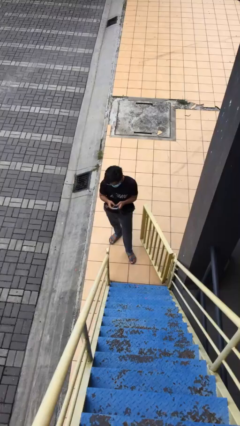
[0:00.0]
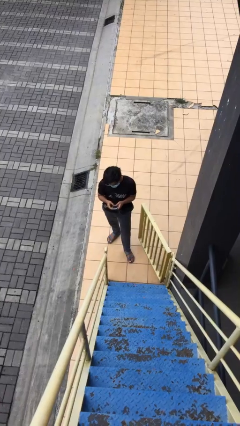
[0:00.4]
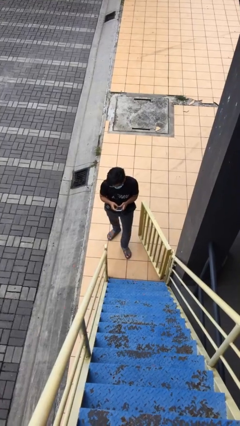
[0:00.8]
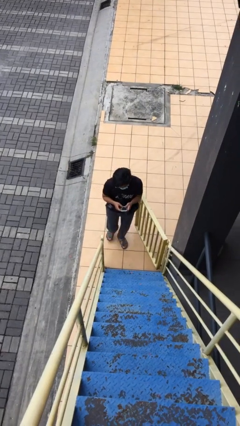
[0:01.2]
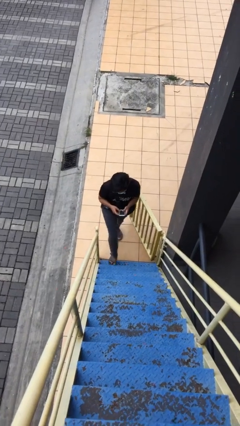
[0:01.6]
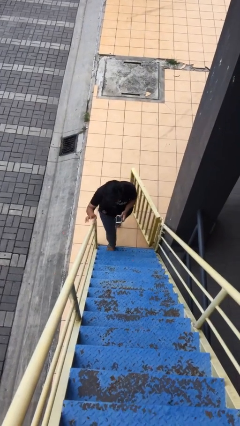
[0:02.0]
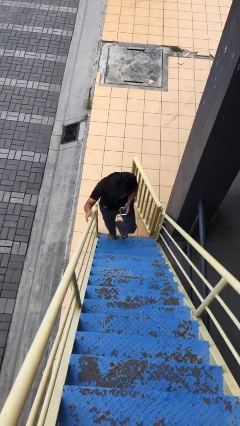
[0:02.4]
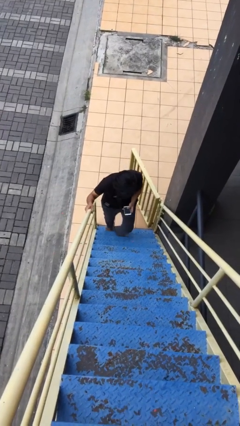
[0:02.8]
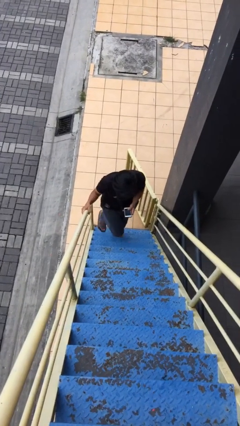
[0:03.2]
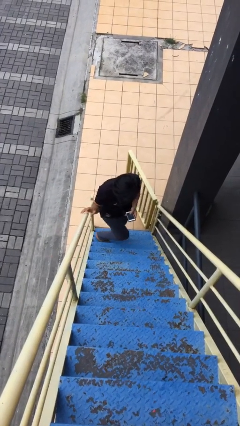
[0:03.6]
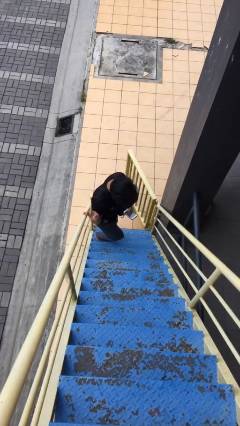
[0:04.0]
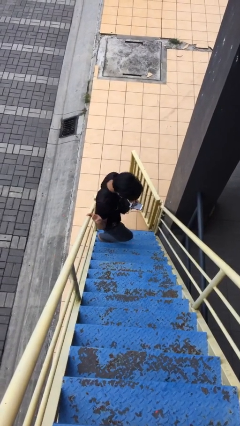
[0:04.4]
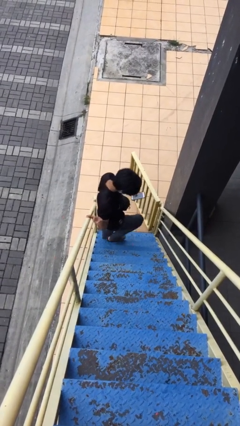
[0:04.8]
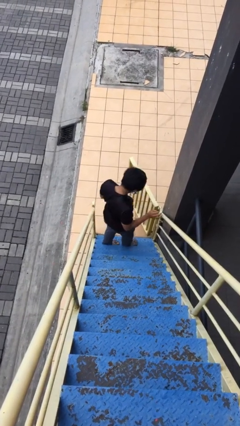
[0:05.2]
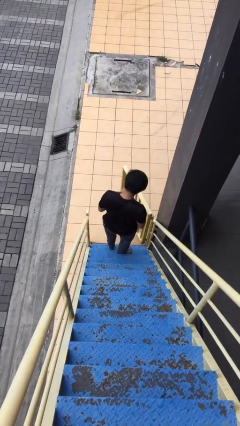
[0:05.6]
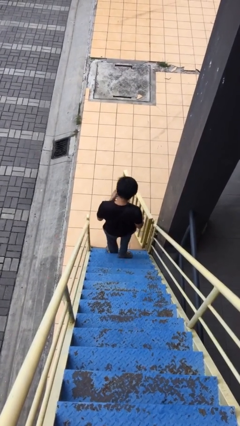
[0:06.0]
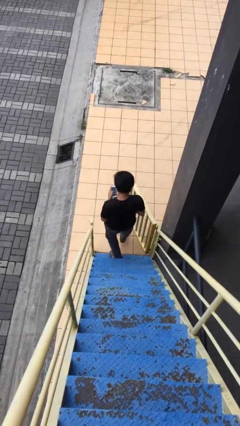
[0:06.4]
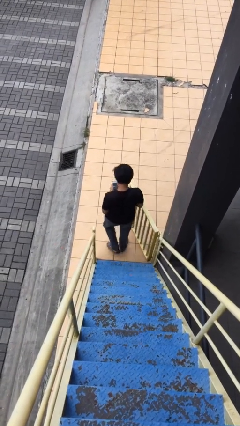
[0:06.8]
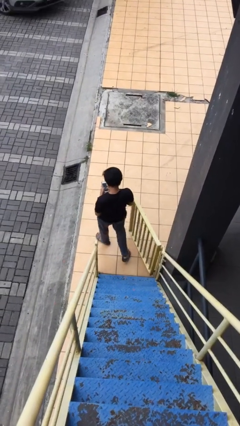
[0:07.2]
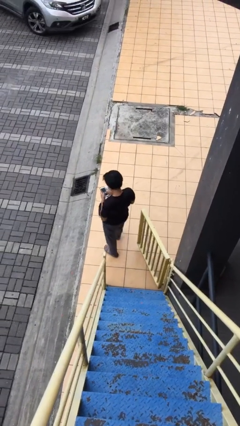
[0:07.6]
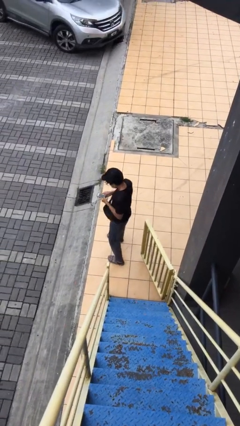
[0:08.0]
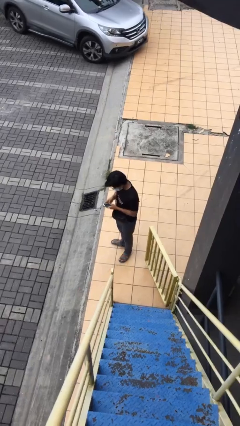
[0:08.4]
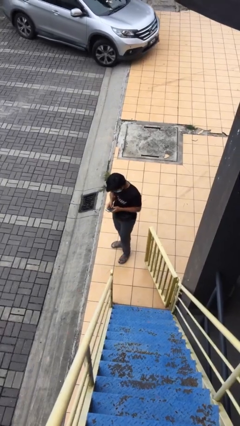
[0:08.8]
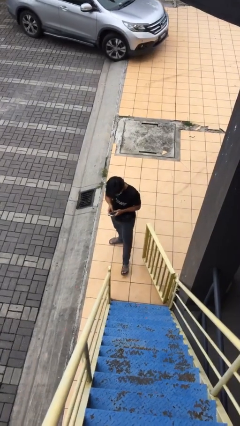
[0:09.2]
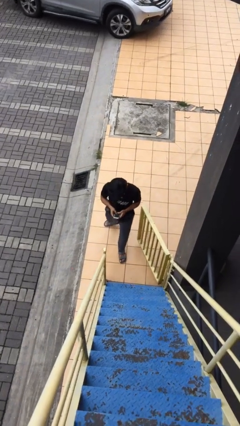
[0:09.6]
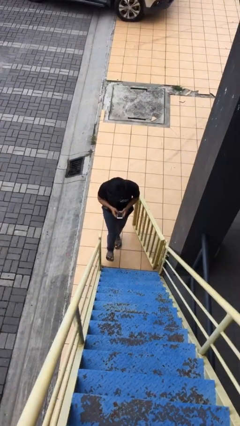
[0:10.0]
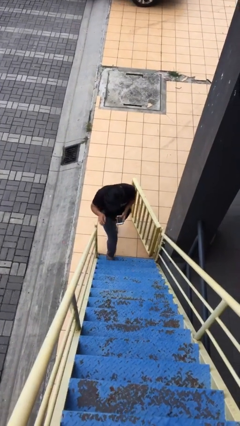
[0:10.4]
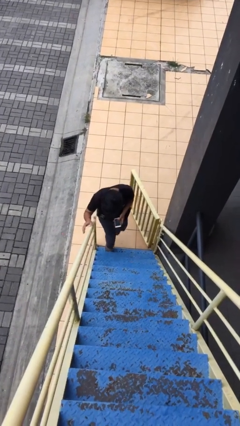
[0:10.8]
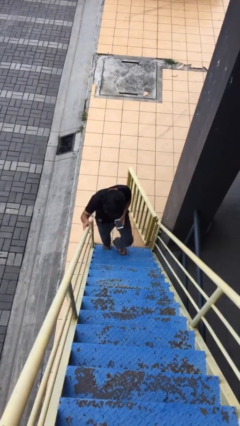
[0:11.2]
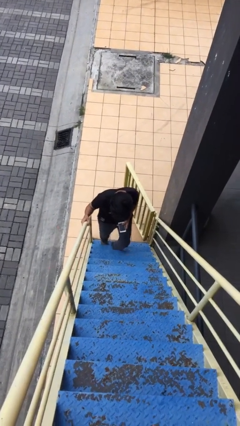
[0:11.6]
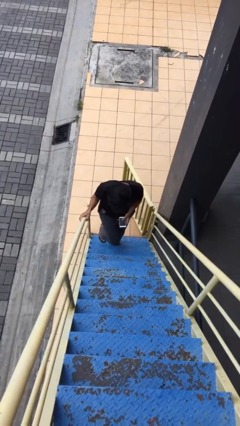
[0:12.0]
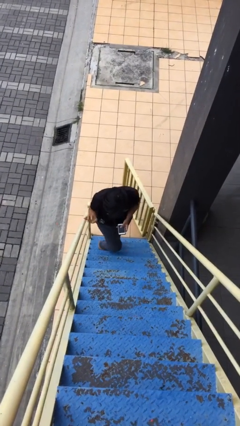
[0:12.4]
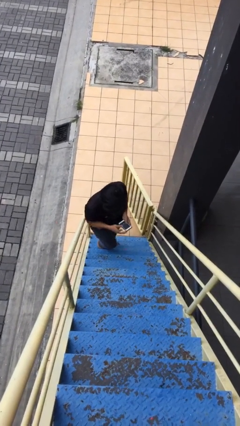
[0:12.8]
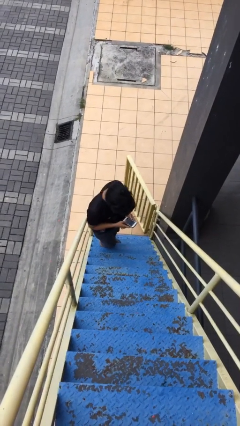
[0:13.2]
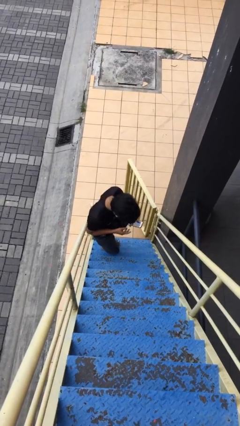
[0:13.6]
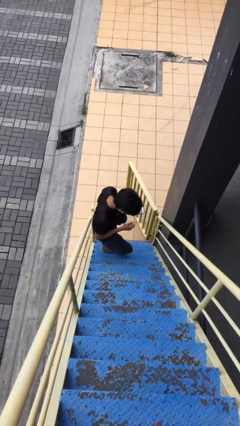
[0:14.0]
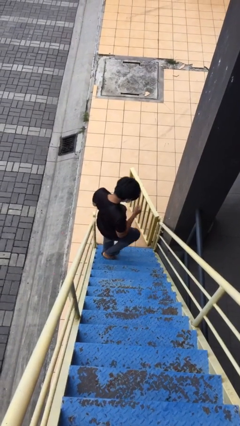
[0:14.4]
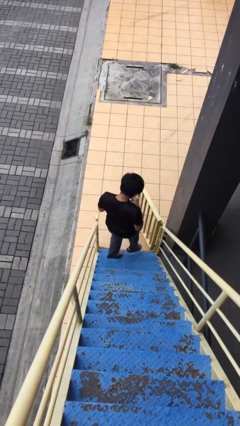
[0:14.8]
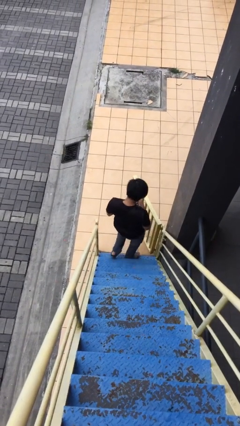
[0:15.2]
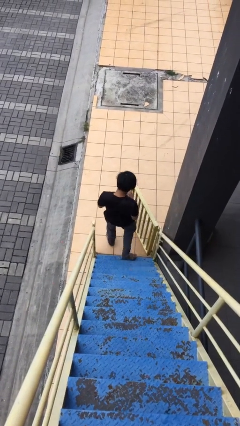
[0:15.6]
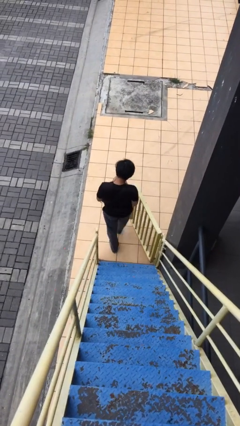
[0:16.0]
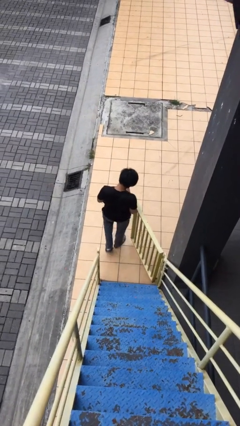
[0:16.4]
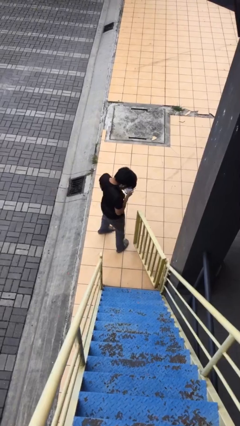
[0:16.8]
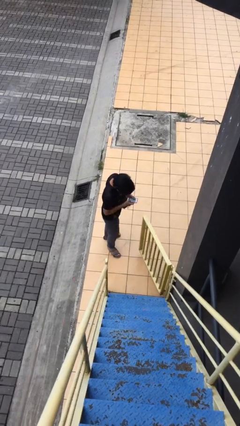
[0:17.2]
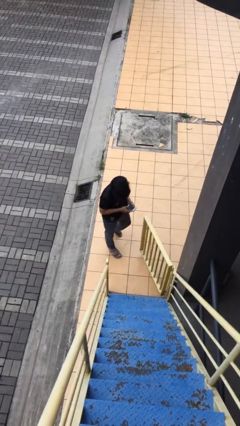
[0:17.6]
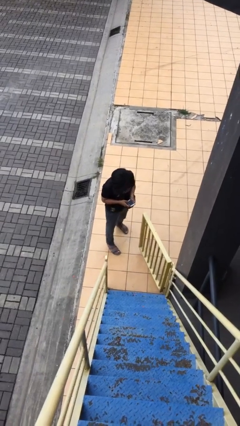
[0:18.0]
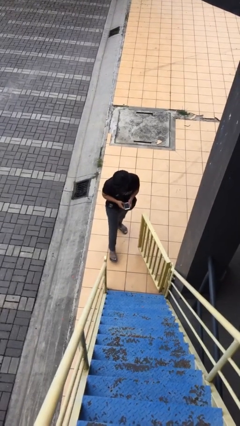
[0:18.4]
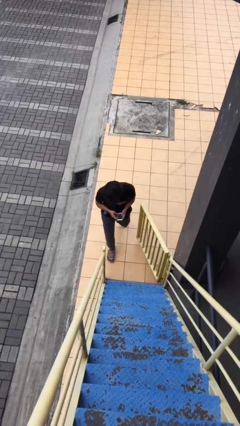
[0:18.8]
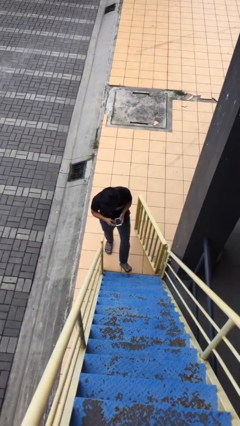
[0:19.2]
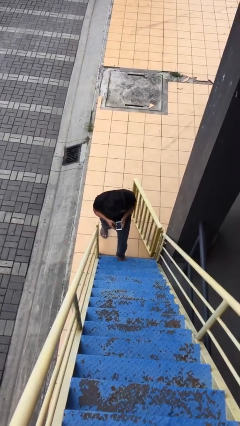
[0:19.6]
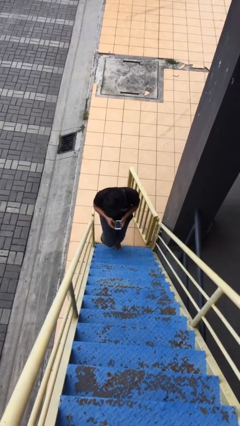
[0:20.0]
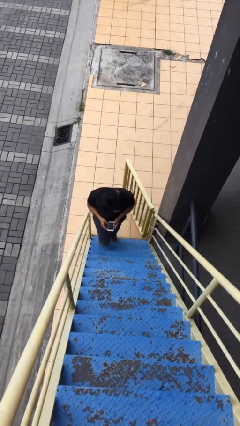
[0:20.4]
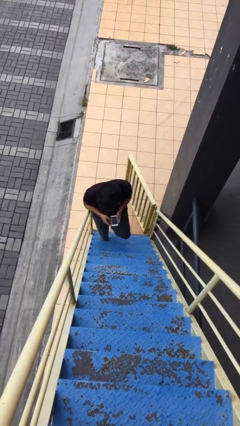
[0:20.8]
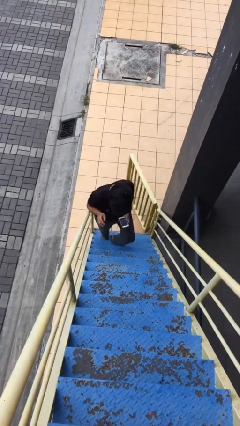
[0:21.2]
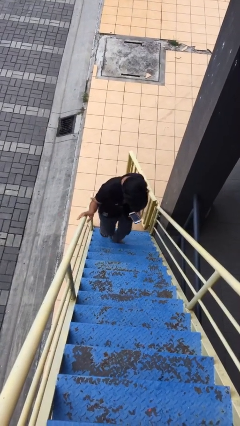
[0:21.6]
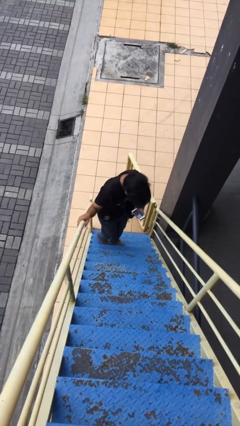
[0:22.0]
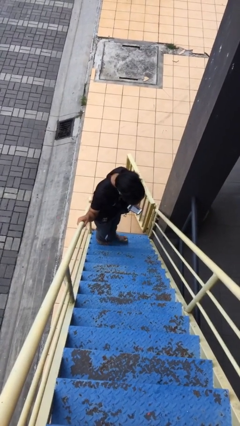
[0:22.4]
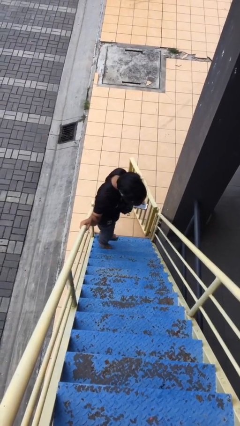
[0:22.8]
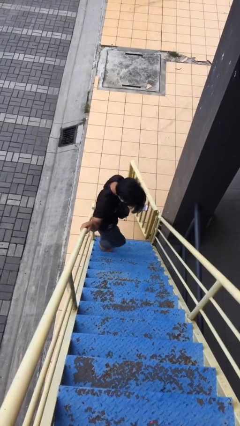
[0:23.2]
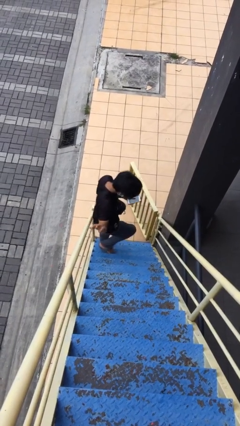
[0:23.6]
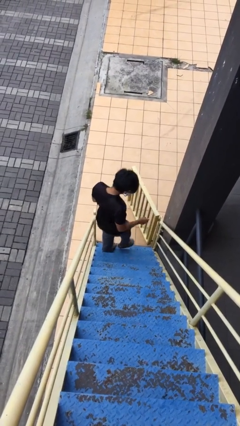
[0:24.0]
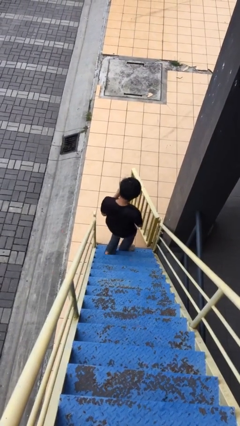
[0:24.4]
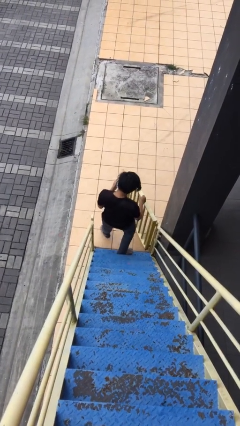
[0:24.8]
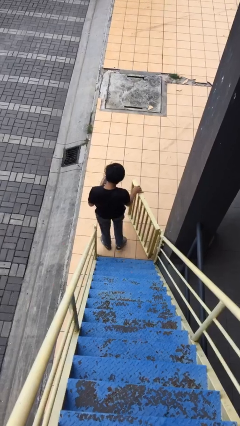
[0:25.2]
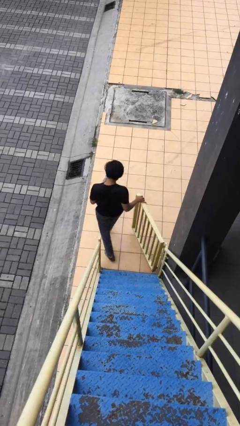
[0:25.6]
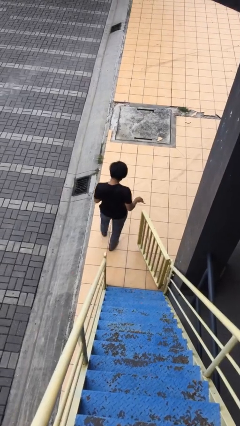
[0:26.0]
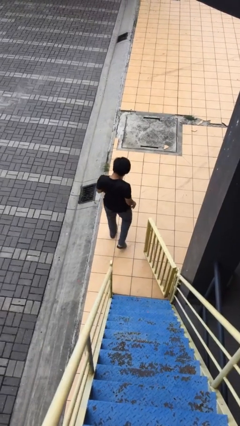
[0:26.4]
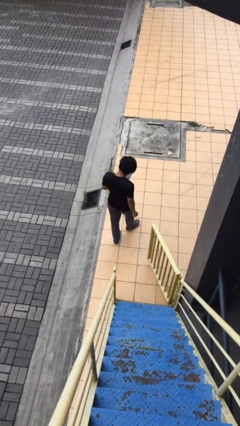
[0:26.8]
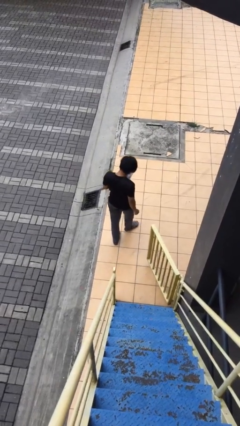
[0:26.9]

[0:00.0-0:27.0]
person texts on phone

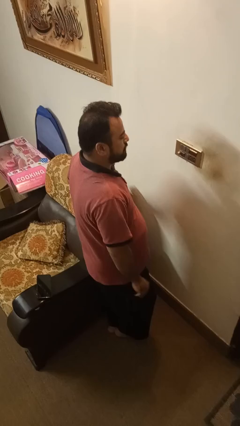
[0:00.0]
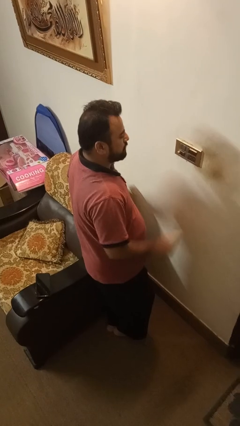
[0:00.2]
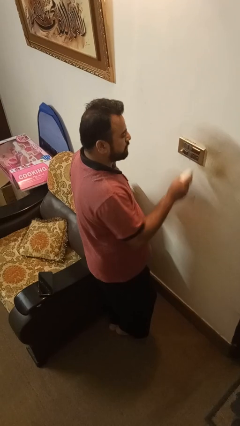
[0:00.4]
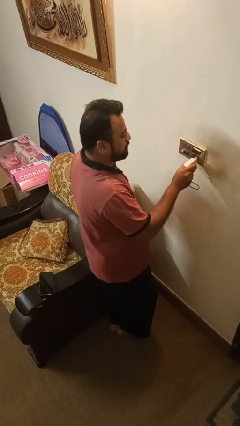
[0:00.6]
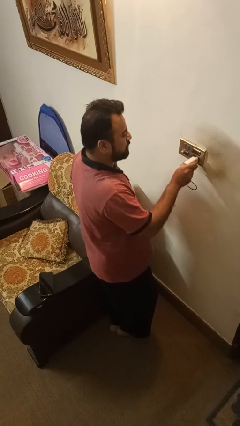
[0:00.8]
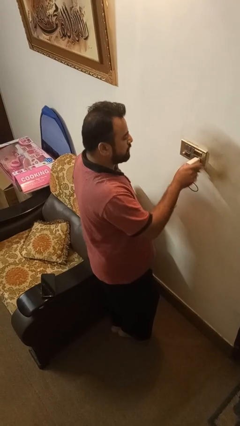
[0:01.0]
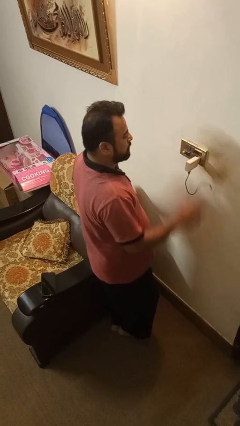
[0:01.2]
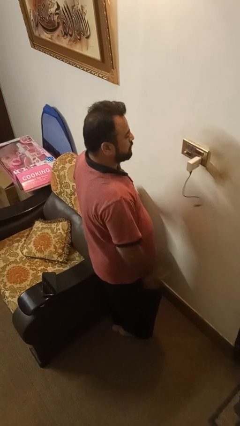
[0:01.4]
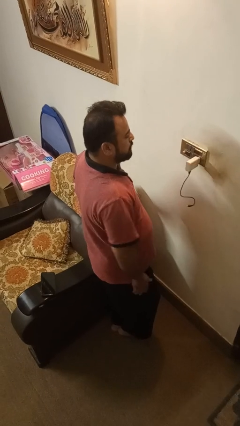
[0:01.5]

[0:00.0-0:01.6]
person plugs into electrical socket

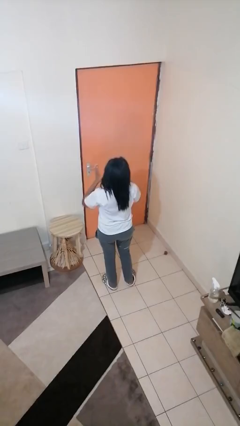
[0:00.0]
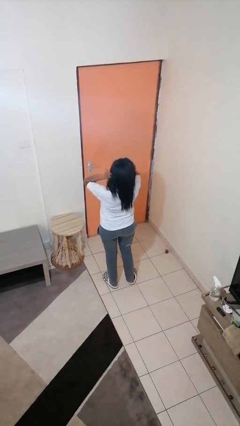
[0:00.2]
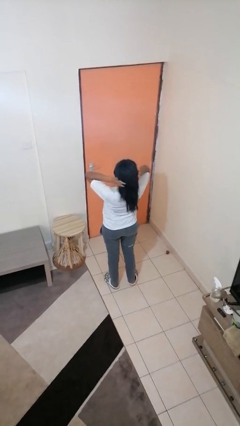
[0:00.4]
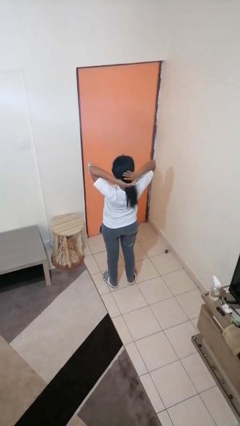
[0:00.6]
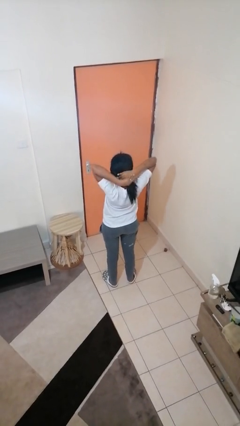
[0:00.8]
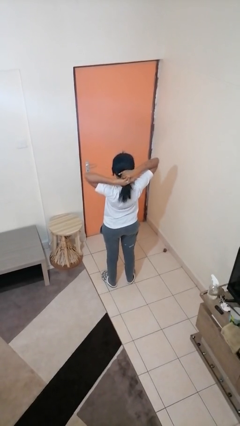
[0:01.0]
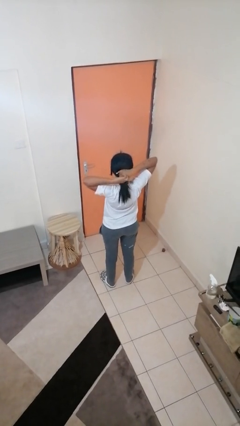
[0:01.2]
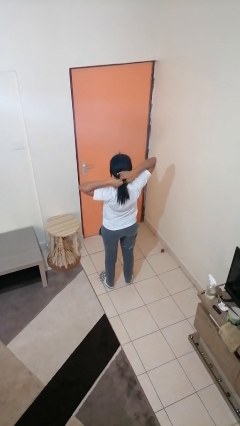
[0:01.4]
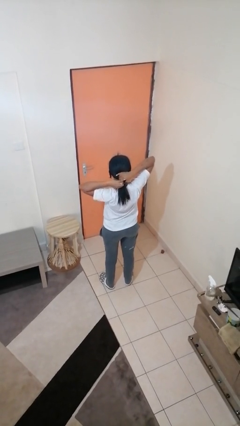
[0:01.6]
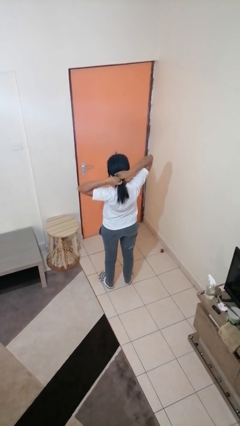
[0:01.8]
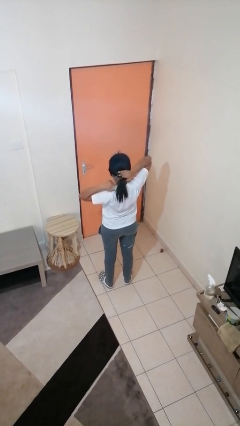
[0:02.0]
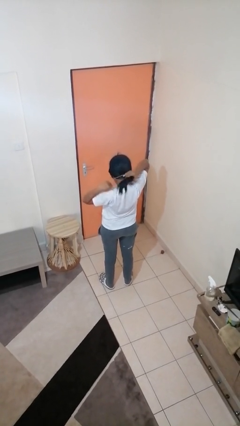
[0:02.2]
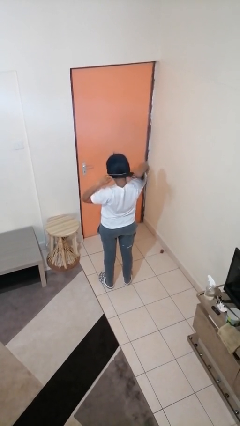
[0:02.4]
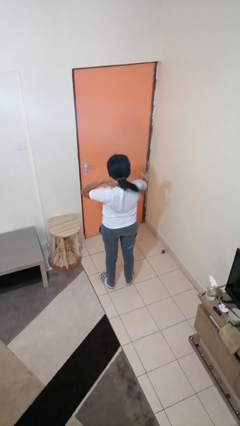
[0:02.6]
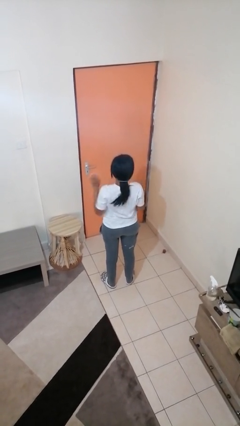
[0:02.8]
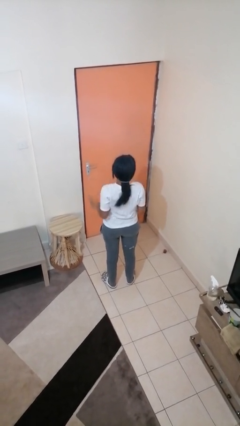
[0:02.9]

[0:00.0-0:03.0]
person puts hair in ponytail
